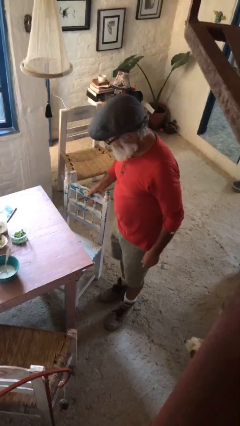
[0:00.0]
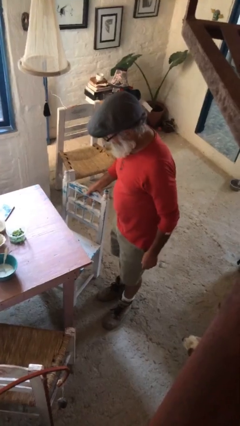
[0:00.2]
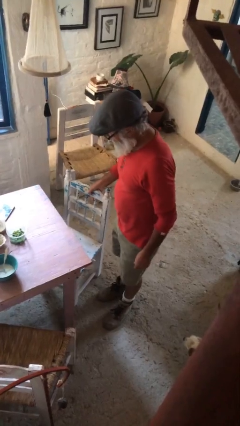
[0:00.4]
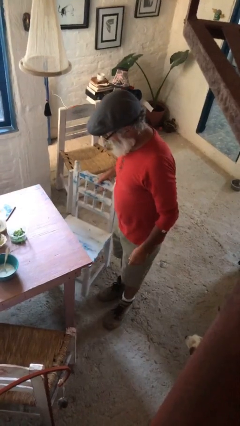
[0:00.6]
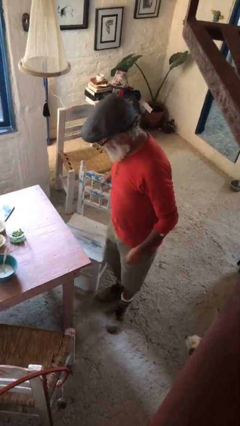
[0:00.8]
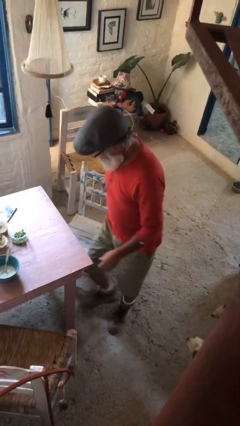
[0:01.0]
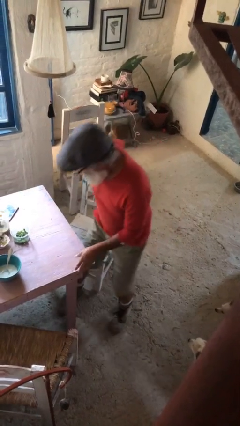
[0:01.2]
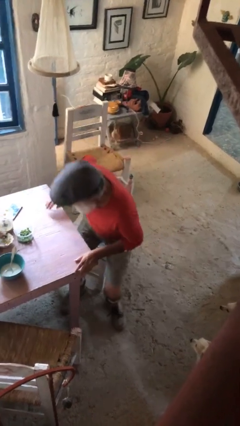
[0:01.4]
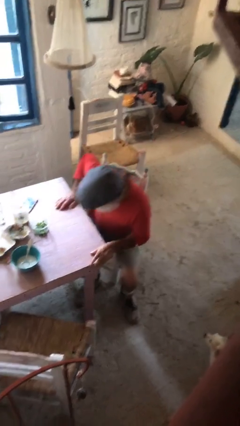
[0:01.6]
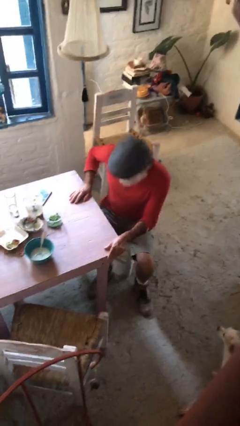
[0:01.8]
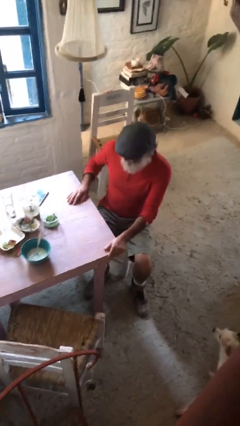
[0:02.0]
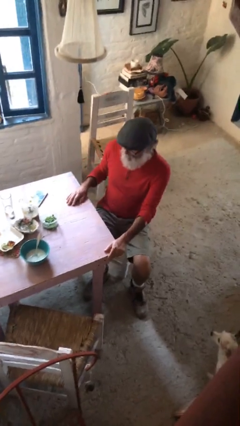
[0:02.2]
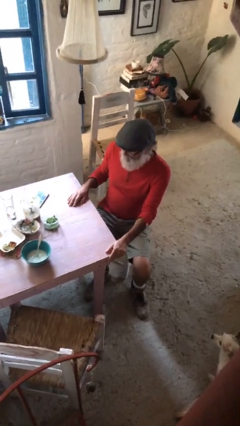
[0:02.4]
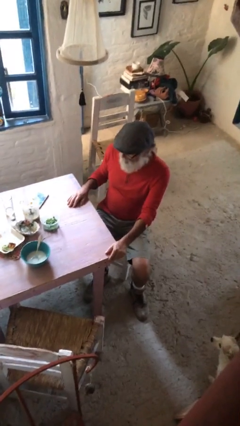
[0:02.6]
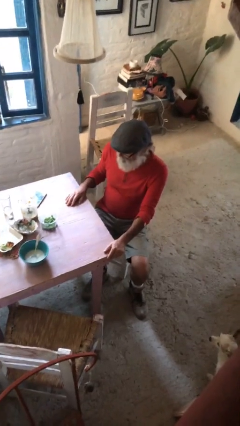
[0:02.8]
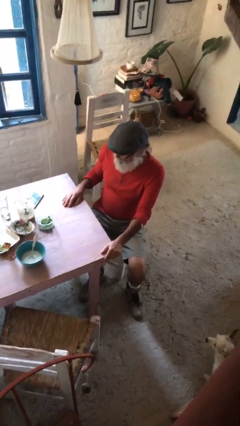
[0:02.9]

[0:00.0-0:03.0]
person sits down

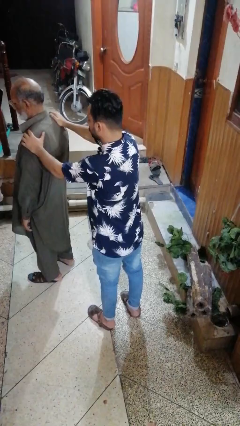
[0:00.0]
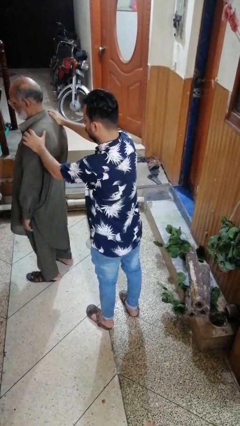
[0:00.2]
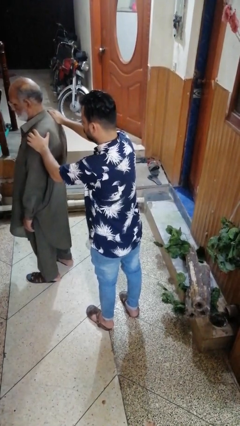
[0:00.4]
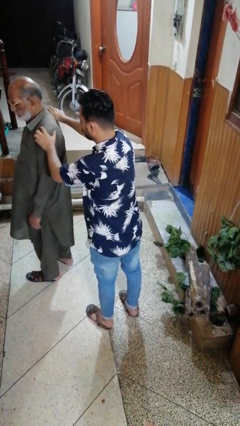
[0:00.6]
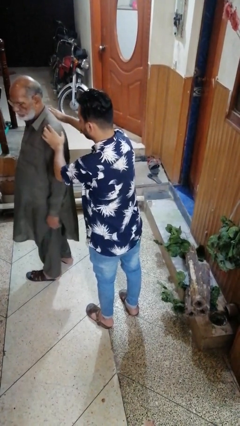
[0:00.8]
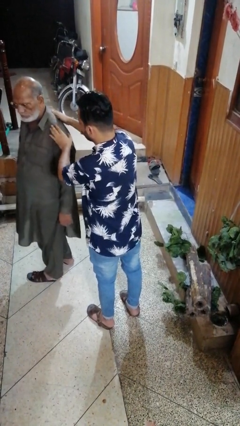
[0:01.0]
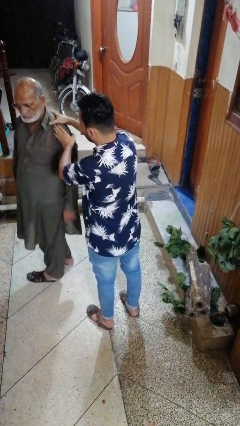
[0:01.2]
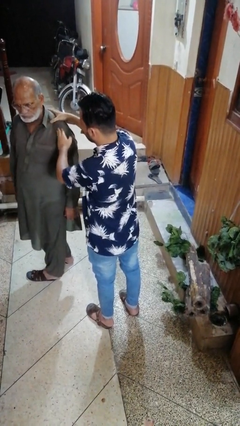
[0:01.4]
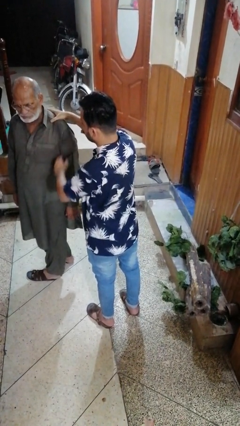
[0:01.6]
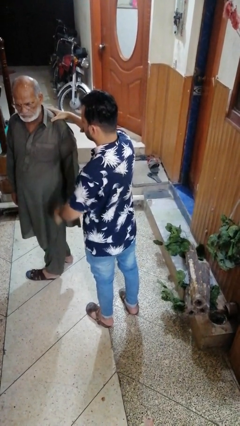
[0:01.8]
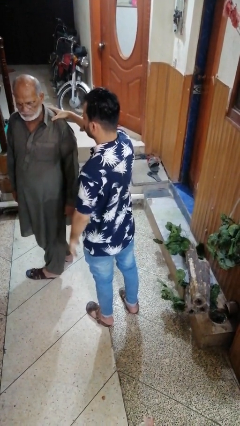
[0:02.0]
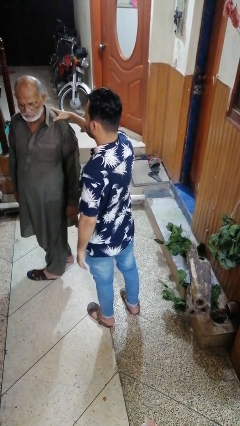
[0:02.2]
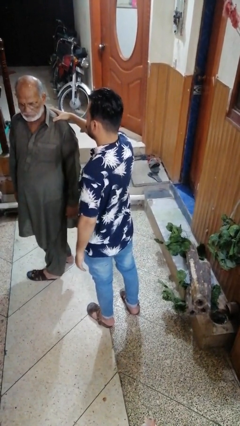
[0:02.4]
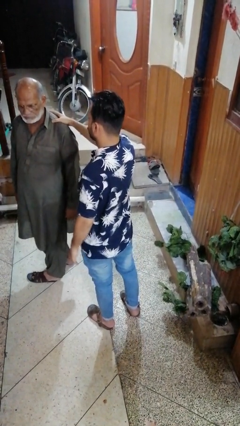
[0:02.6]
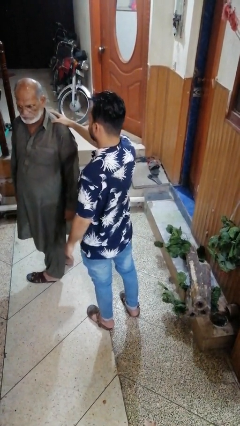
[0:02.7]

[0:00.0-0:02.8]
person spins person around

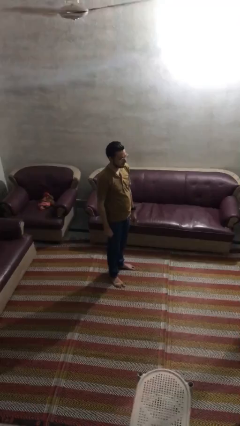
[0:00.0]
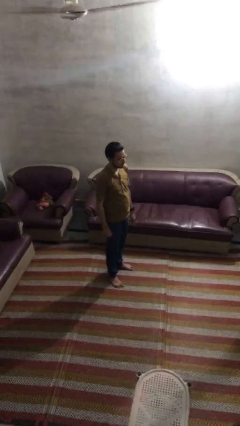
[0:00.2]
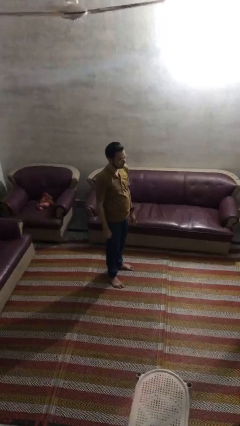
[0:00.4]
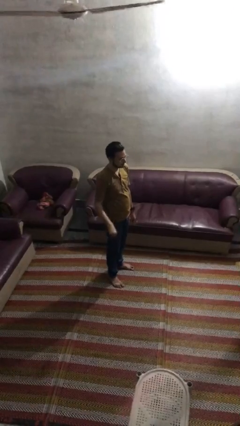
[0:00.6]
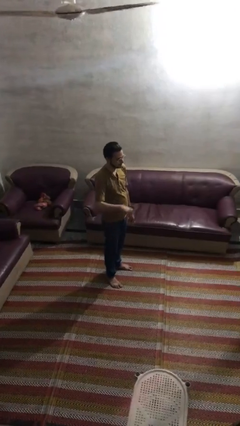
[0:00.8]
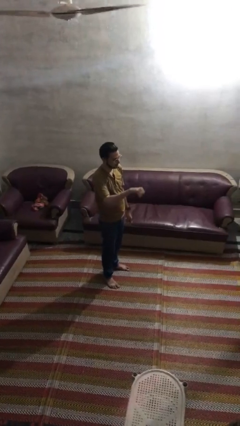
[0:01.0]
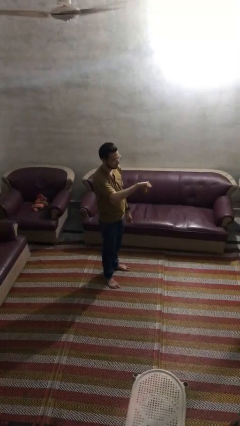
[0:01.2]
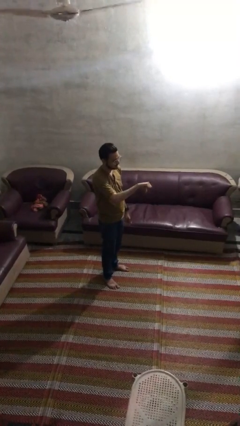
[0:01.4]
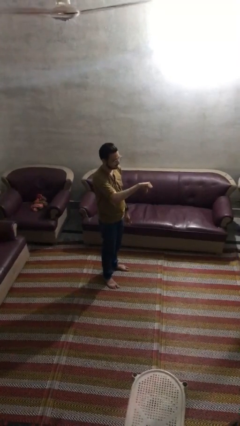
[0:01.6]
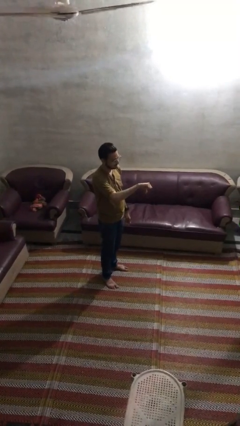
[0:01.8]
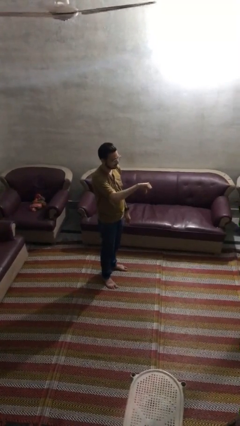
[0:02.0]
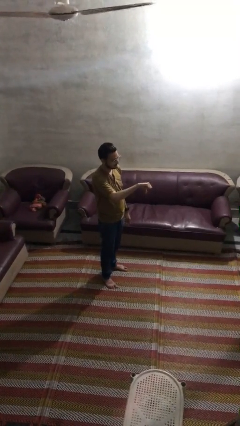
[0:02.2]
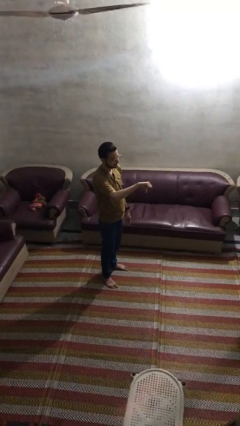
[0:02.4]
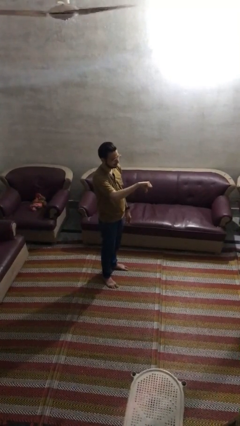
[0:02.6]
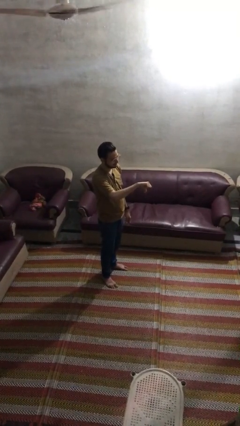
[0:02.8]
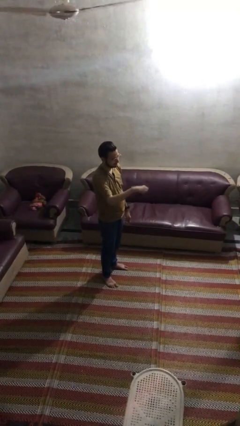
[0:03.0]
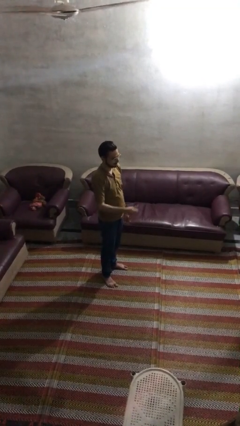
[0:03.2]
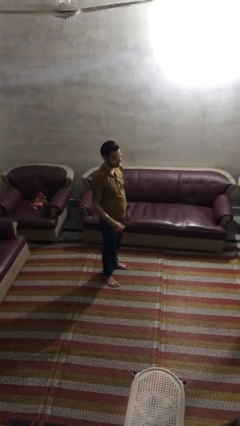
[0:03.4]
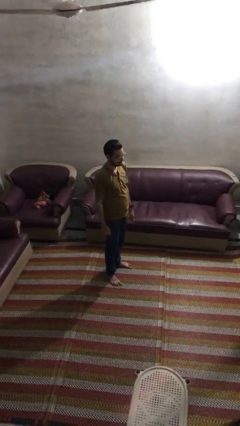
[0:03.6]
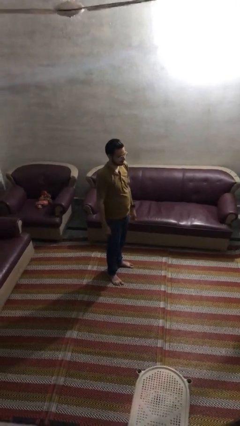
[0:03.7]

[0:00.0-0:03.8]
person gestures thumbs down

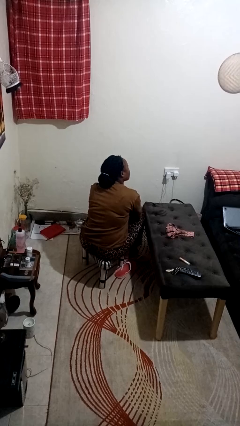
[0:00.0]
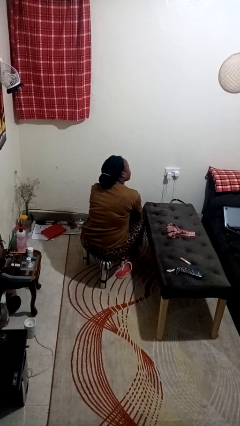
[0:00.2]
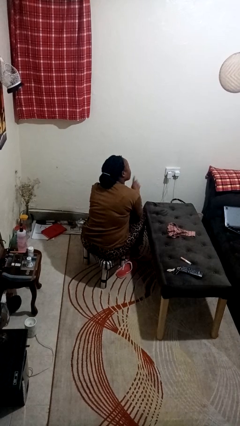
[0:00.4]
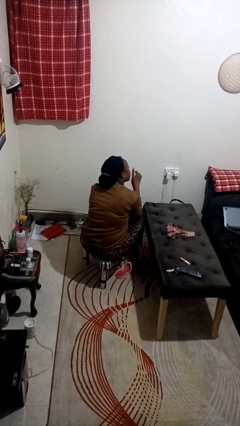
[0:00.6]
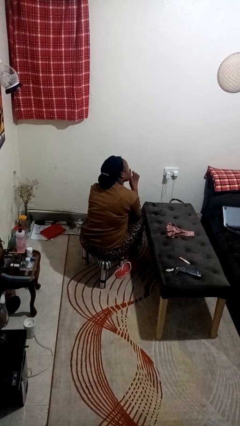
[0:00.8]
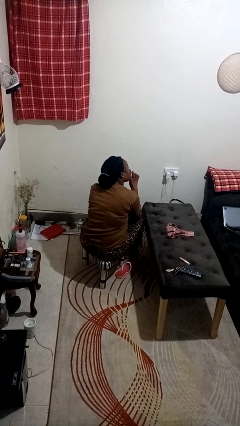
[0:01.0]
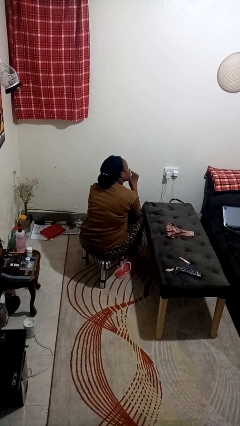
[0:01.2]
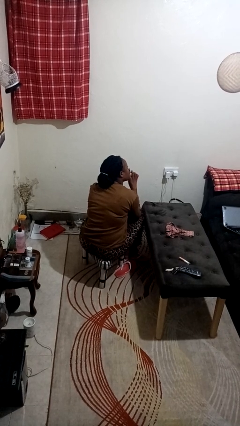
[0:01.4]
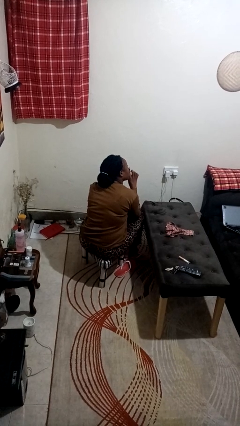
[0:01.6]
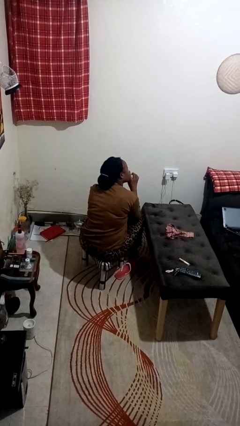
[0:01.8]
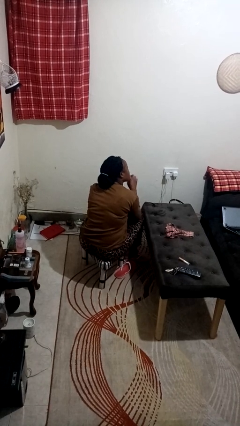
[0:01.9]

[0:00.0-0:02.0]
person gestures be quiet

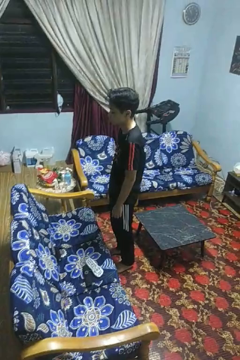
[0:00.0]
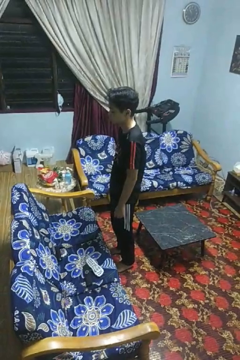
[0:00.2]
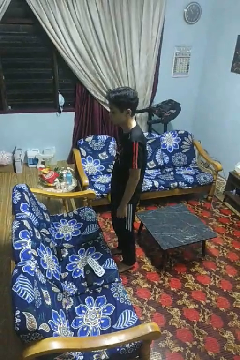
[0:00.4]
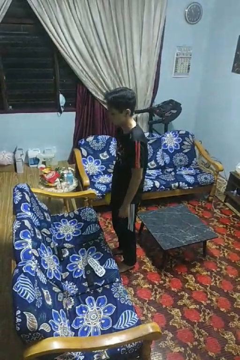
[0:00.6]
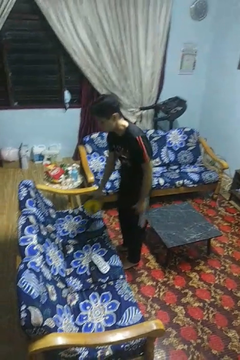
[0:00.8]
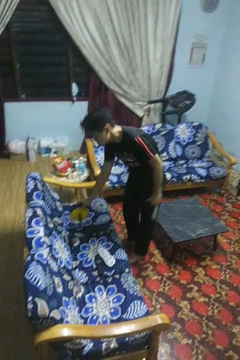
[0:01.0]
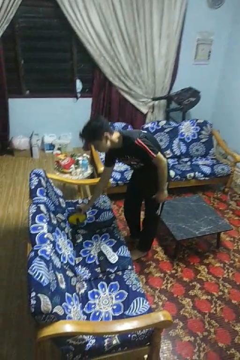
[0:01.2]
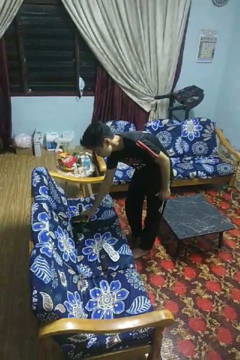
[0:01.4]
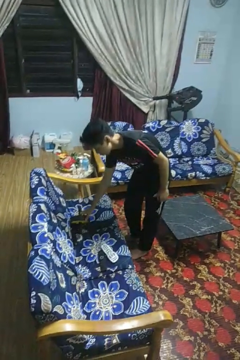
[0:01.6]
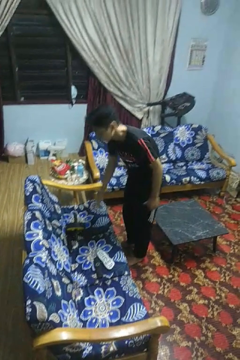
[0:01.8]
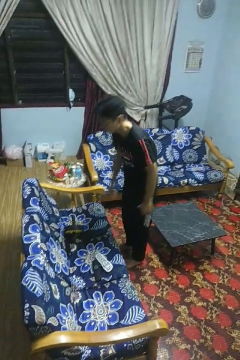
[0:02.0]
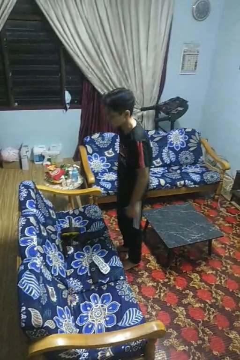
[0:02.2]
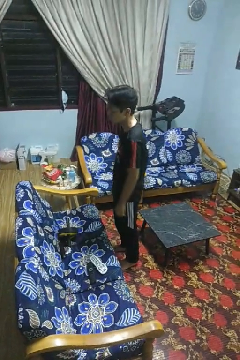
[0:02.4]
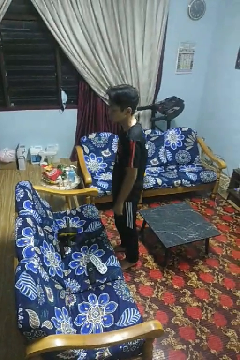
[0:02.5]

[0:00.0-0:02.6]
person puts down object on couch

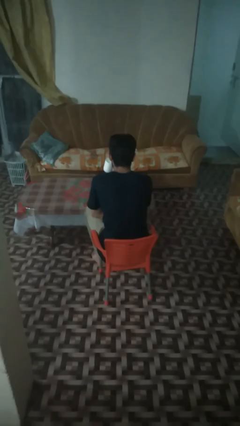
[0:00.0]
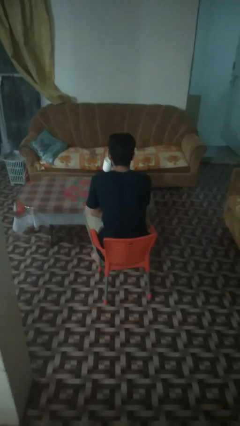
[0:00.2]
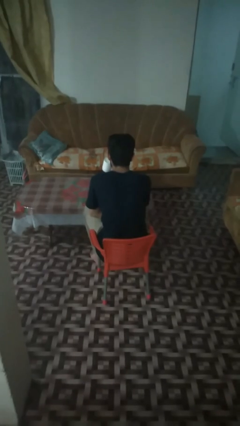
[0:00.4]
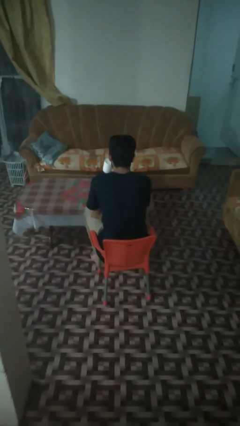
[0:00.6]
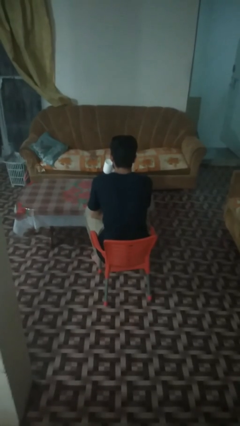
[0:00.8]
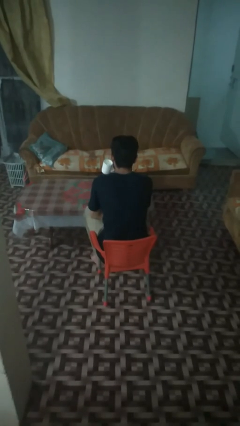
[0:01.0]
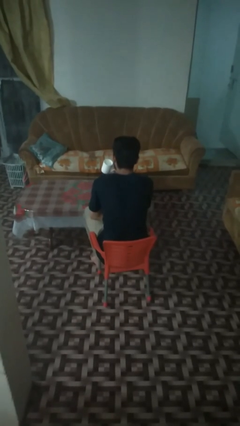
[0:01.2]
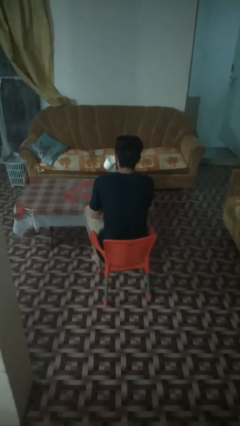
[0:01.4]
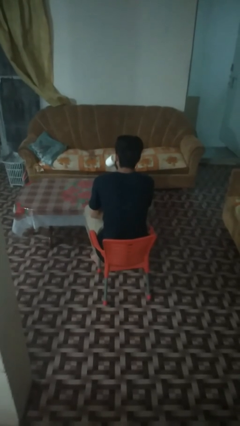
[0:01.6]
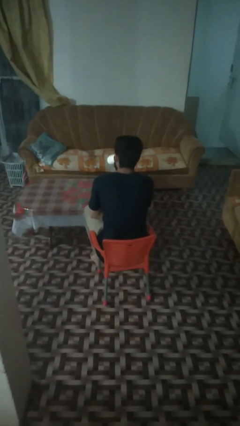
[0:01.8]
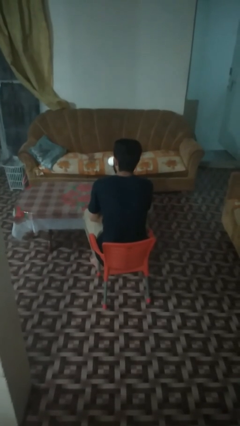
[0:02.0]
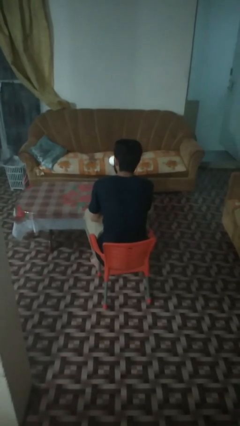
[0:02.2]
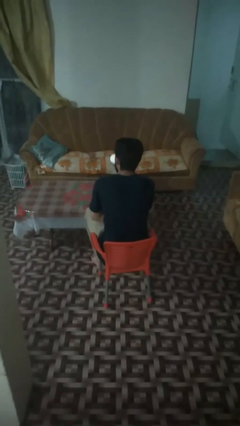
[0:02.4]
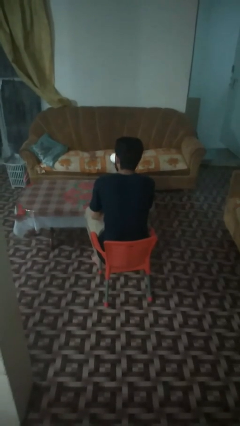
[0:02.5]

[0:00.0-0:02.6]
person drinks from mug

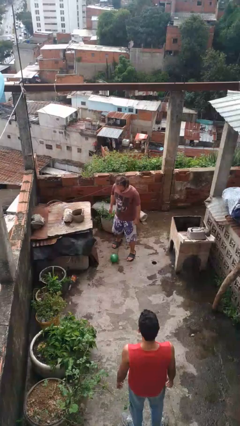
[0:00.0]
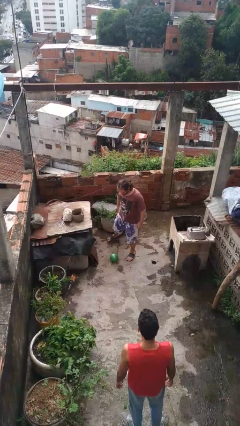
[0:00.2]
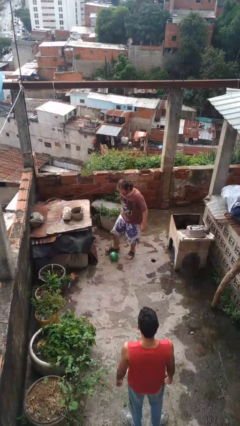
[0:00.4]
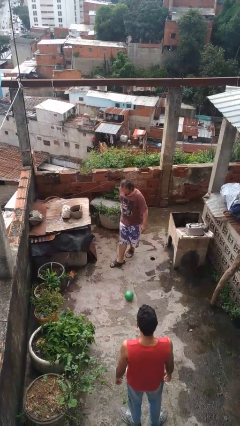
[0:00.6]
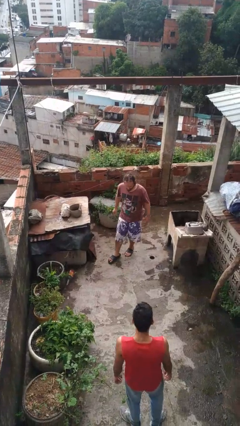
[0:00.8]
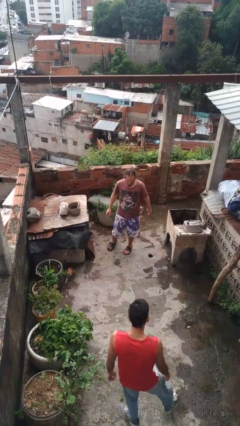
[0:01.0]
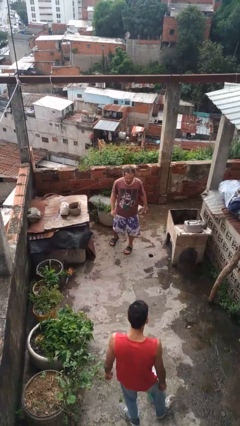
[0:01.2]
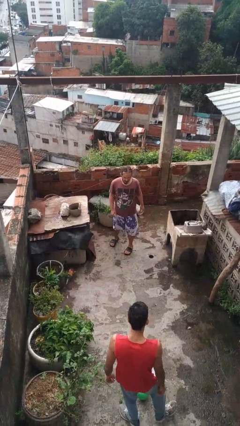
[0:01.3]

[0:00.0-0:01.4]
person kicks object to person
